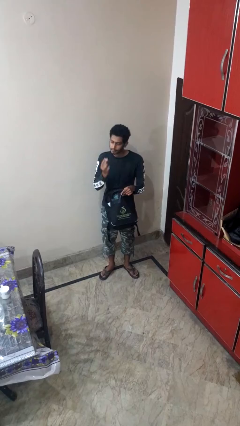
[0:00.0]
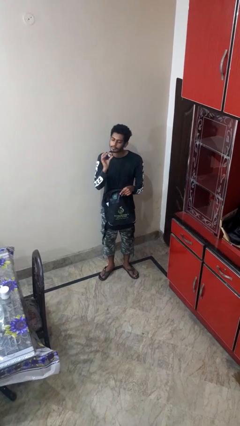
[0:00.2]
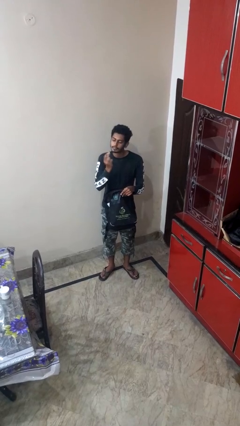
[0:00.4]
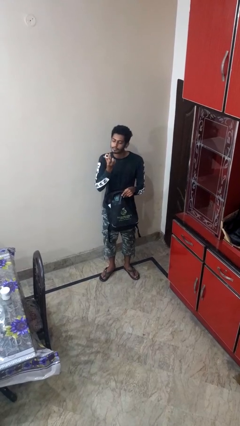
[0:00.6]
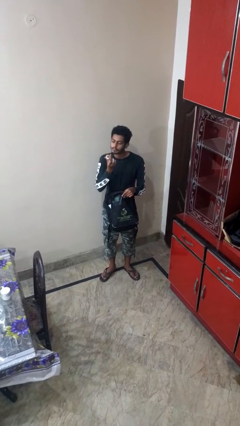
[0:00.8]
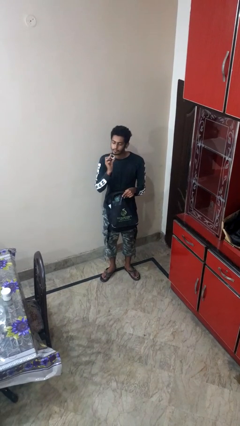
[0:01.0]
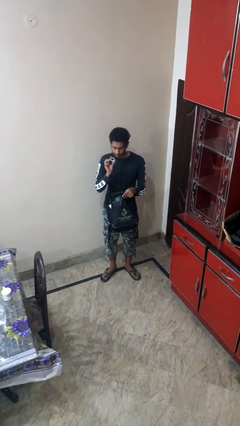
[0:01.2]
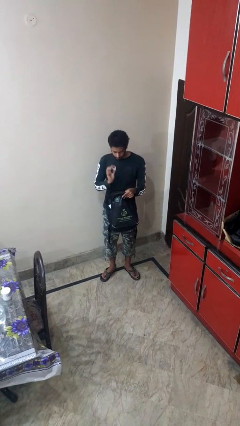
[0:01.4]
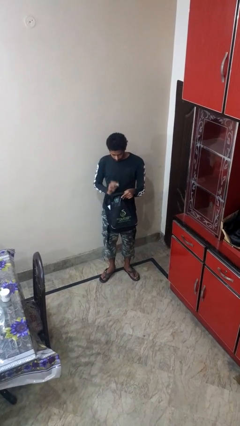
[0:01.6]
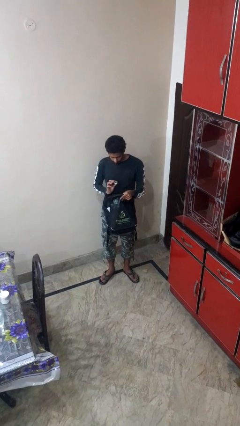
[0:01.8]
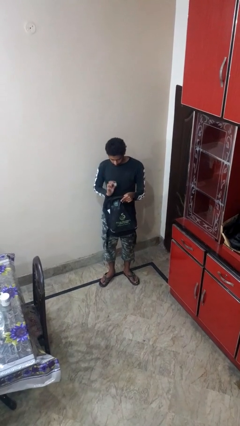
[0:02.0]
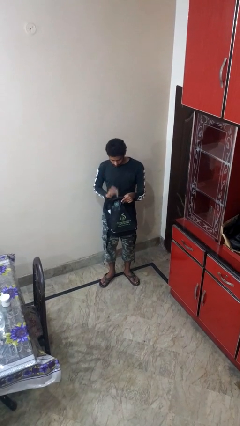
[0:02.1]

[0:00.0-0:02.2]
person takes object from backpack

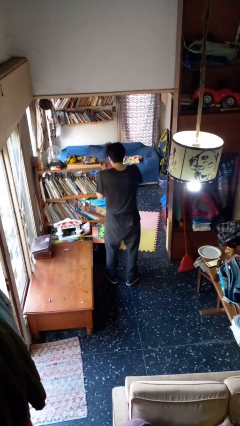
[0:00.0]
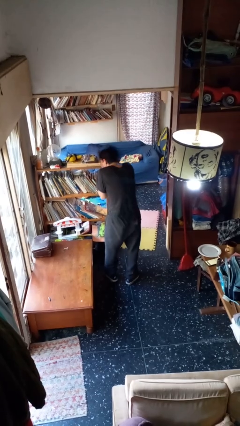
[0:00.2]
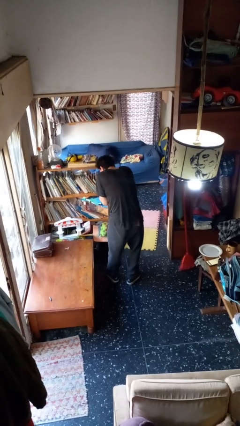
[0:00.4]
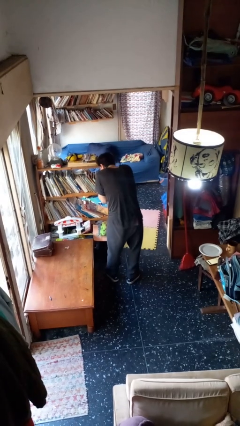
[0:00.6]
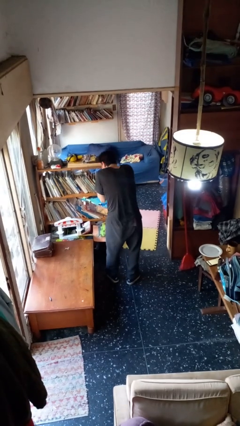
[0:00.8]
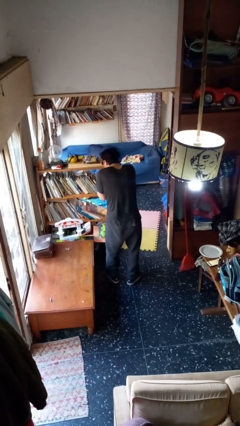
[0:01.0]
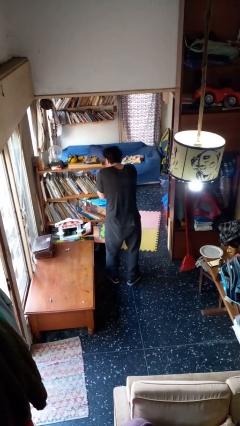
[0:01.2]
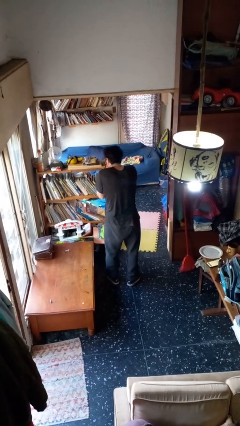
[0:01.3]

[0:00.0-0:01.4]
person sneezes into hand

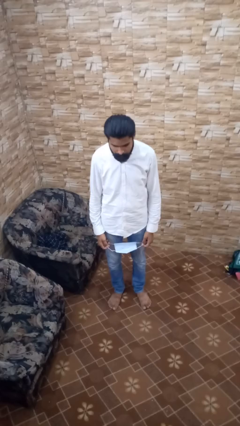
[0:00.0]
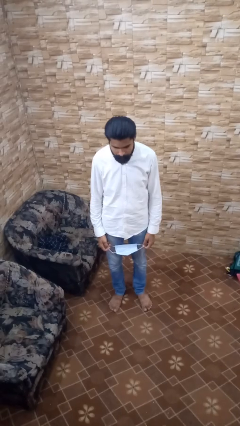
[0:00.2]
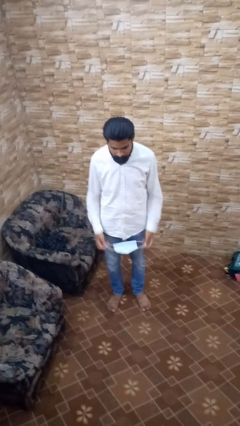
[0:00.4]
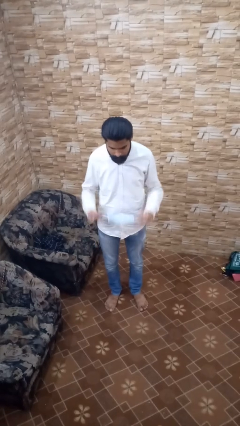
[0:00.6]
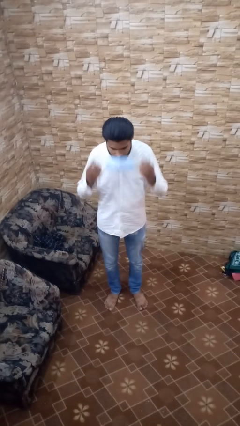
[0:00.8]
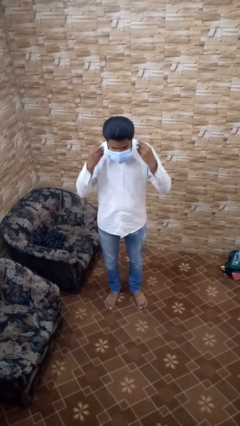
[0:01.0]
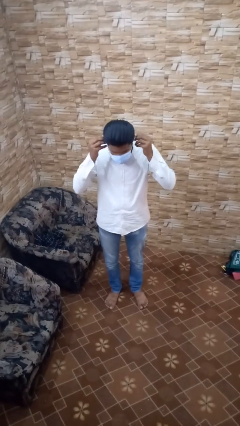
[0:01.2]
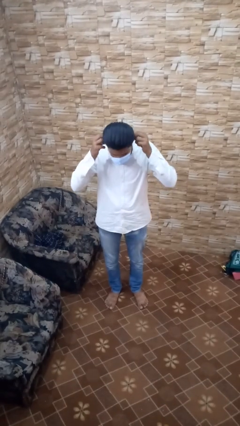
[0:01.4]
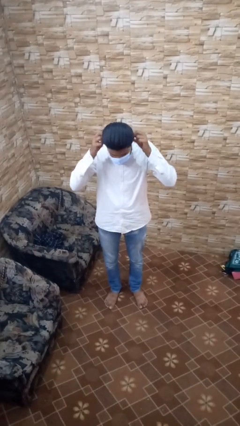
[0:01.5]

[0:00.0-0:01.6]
person puts on facemask

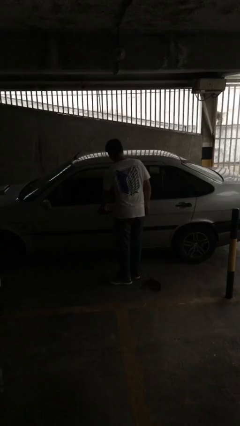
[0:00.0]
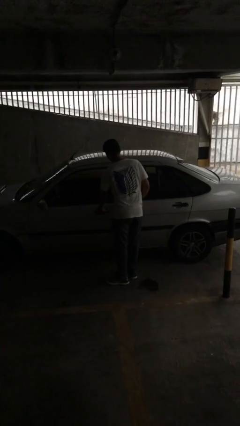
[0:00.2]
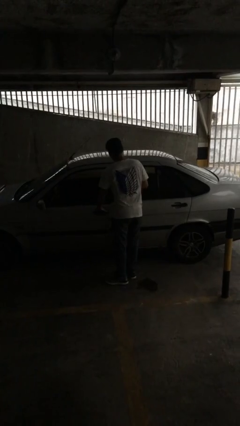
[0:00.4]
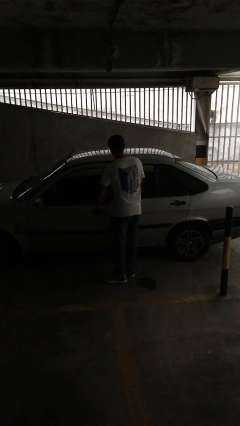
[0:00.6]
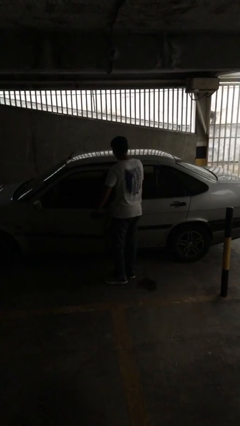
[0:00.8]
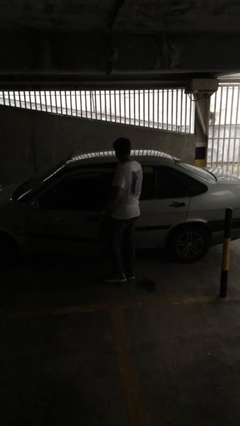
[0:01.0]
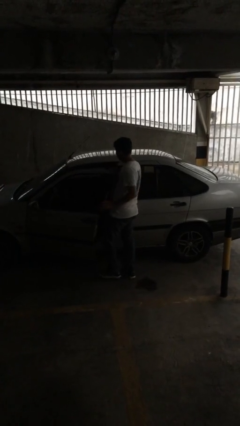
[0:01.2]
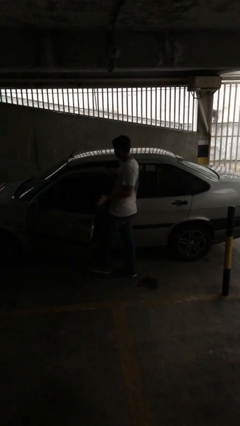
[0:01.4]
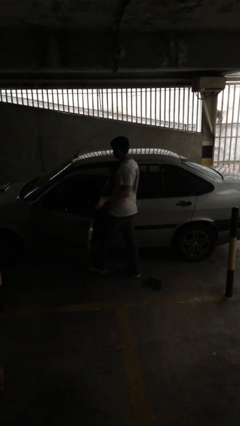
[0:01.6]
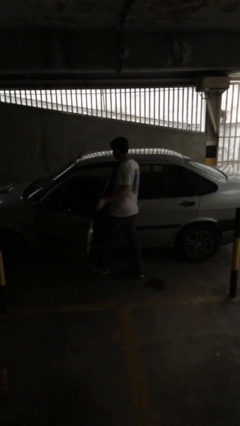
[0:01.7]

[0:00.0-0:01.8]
person opens car door

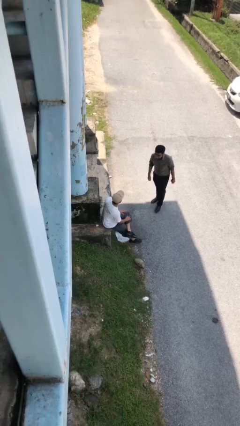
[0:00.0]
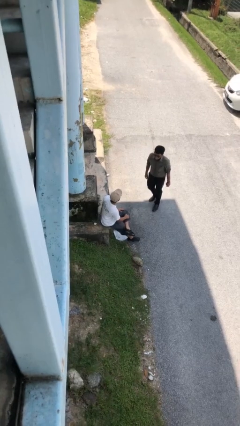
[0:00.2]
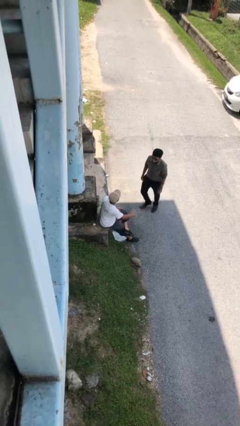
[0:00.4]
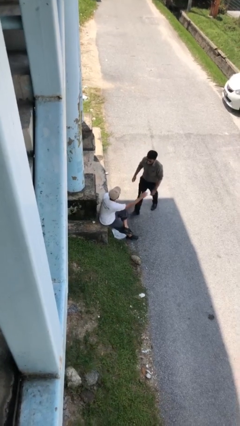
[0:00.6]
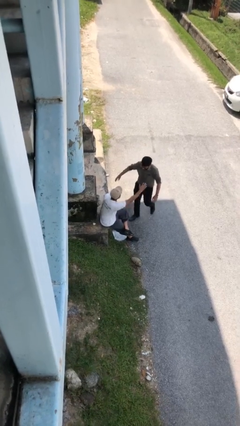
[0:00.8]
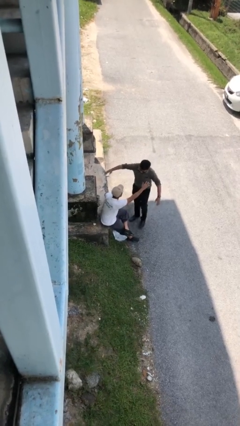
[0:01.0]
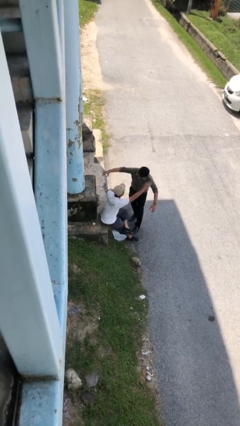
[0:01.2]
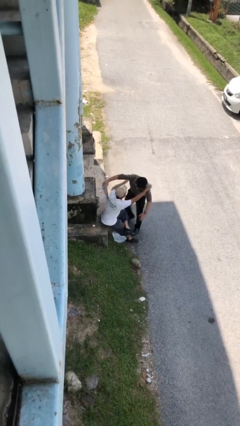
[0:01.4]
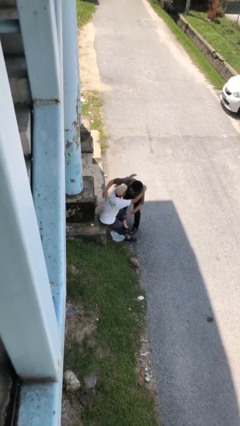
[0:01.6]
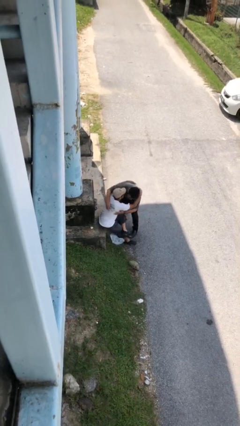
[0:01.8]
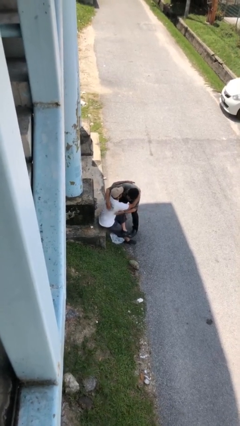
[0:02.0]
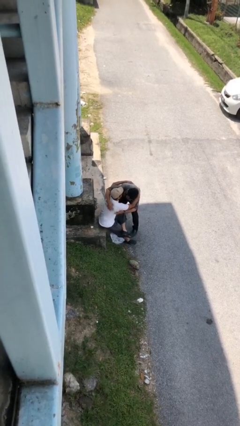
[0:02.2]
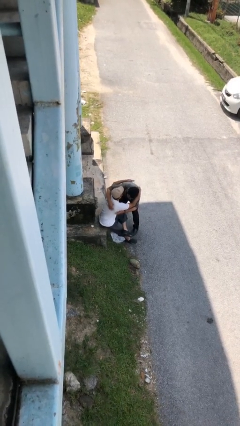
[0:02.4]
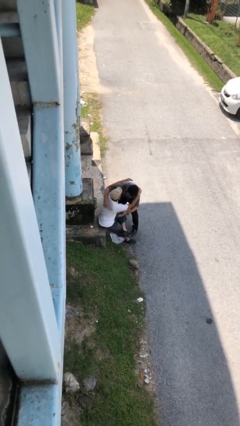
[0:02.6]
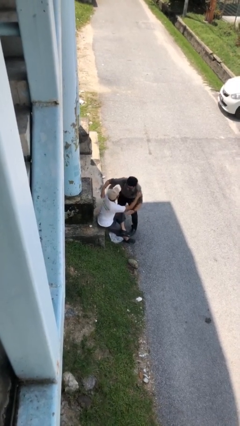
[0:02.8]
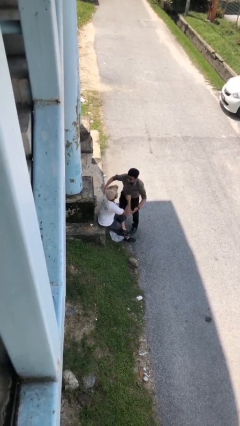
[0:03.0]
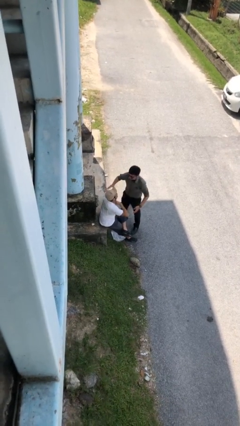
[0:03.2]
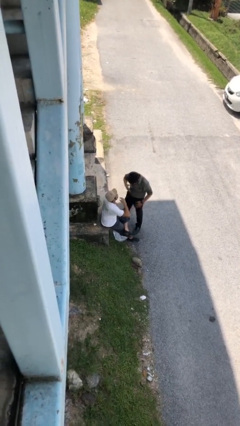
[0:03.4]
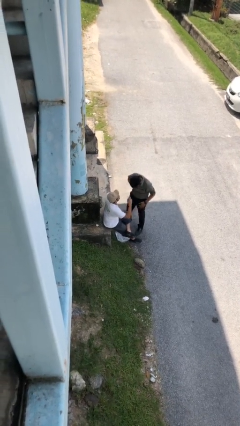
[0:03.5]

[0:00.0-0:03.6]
person embraces person

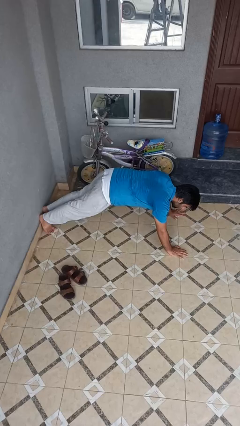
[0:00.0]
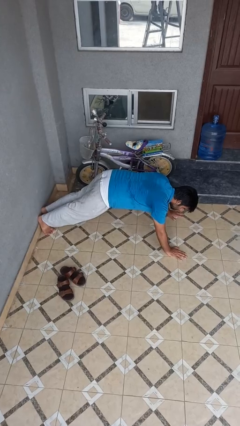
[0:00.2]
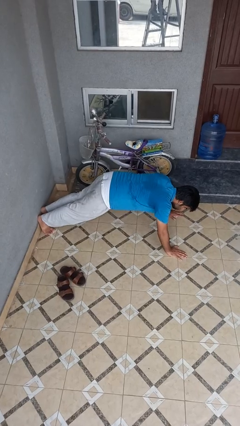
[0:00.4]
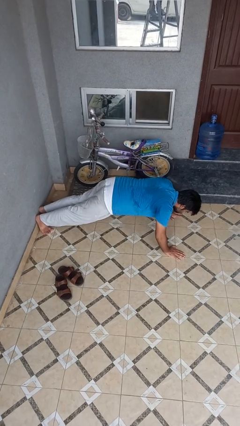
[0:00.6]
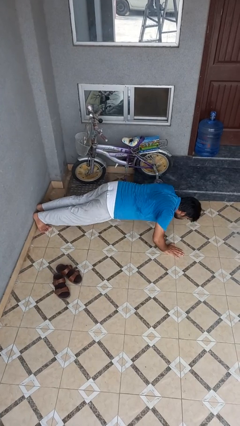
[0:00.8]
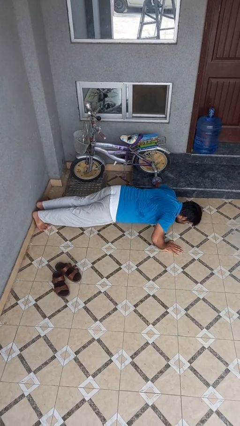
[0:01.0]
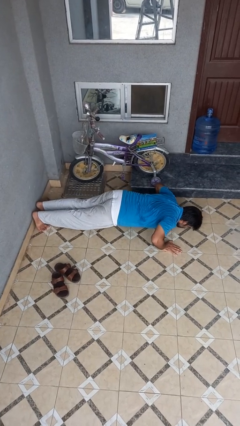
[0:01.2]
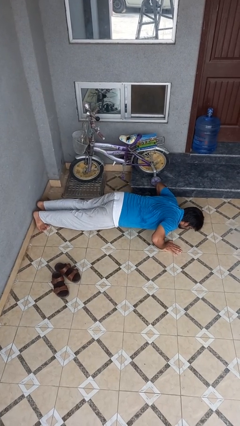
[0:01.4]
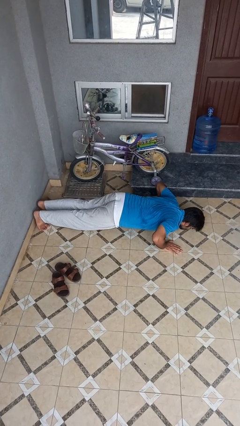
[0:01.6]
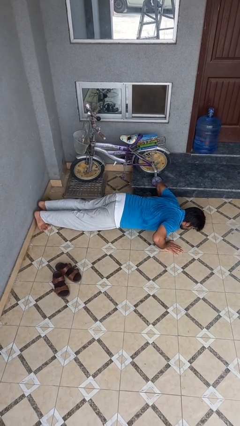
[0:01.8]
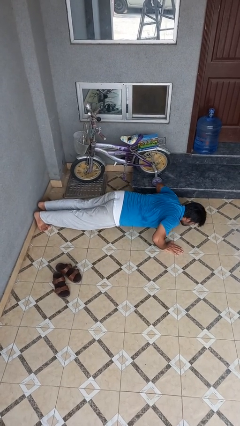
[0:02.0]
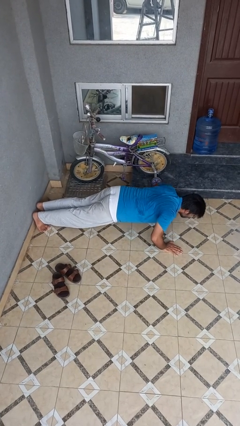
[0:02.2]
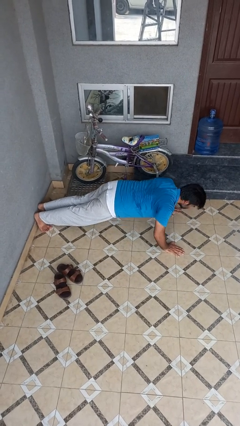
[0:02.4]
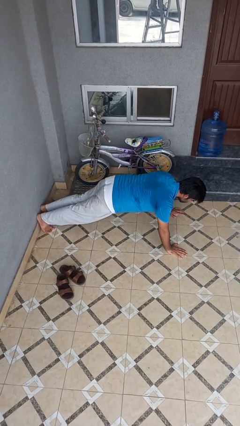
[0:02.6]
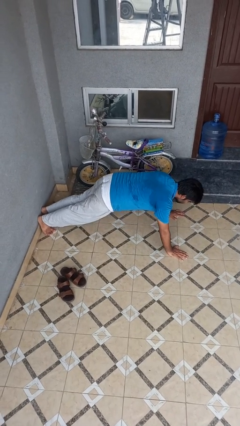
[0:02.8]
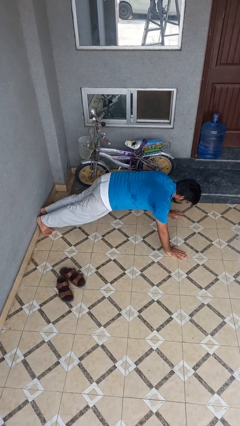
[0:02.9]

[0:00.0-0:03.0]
person exercises with pushup

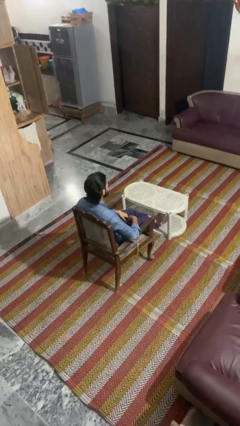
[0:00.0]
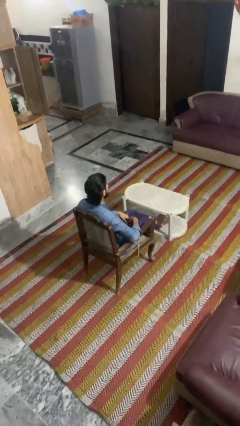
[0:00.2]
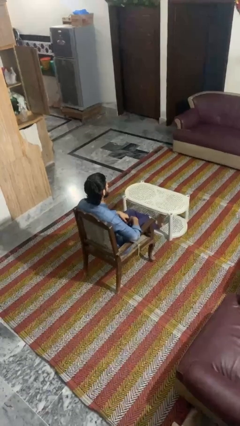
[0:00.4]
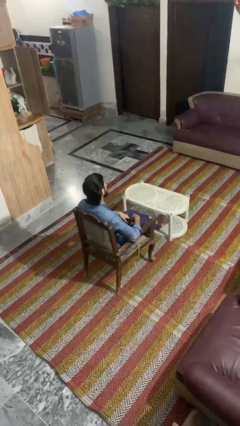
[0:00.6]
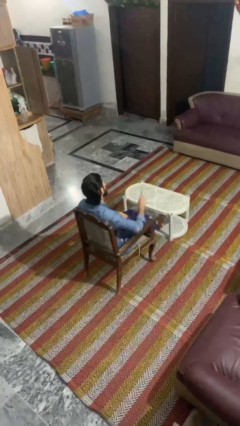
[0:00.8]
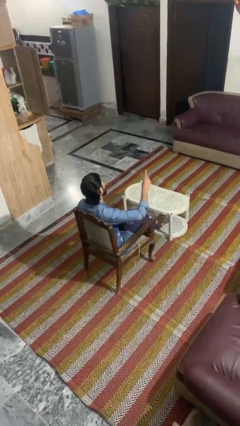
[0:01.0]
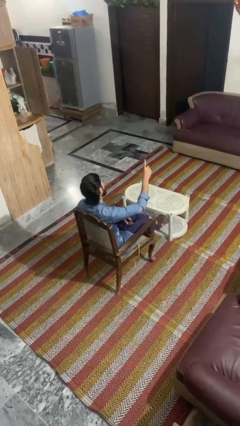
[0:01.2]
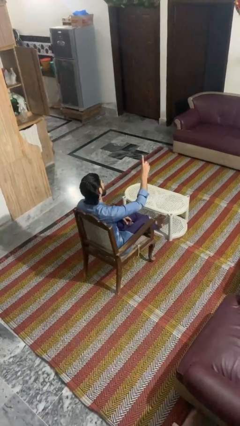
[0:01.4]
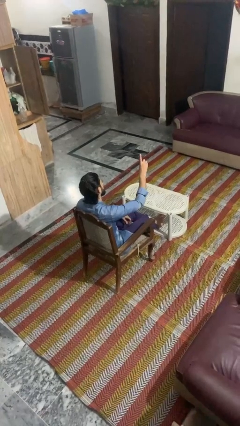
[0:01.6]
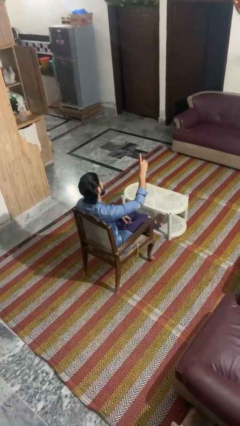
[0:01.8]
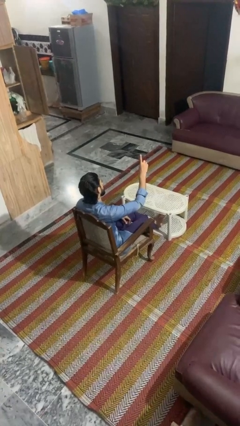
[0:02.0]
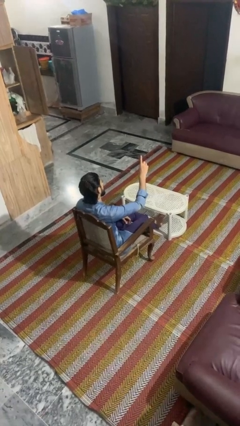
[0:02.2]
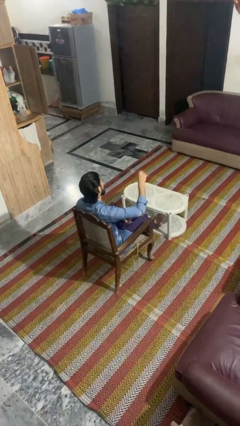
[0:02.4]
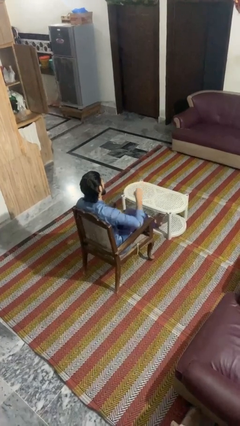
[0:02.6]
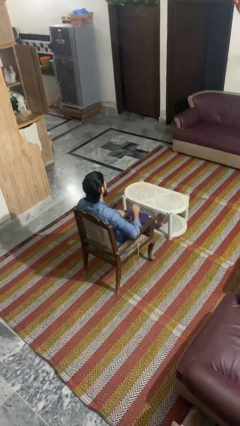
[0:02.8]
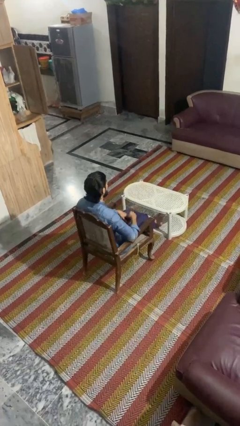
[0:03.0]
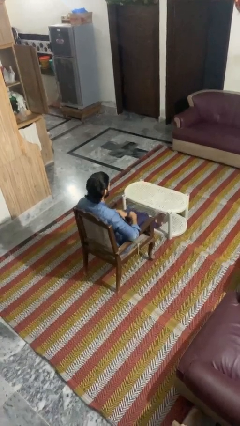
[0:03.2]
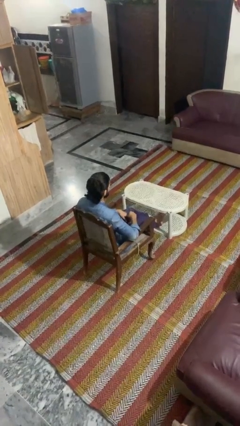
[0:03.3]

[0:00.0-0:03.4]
person gestures number one
